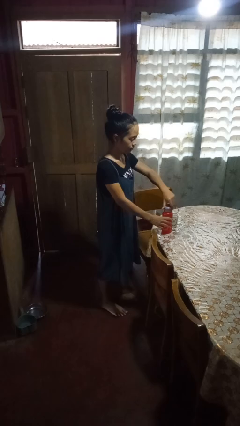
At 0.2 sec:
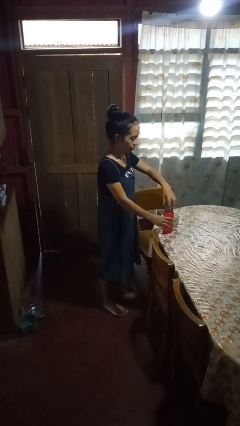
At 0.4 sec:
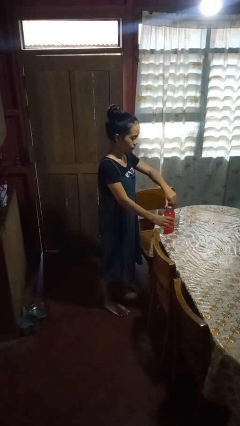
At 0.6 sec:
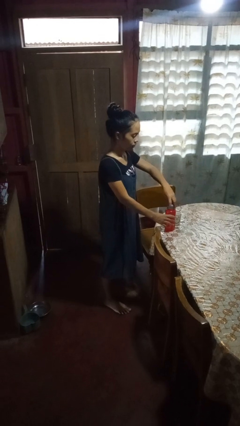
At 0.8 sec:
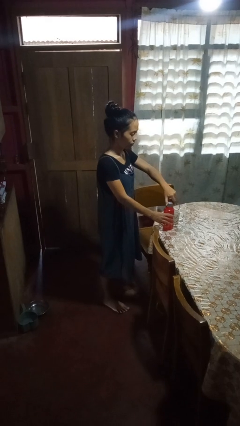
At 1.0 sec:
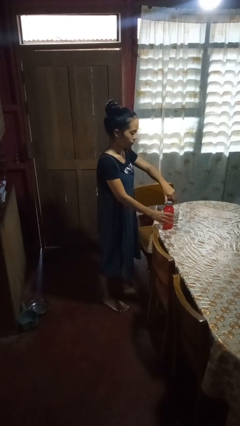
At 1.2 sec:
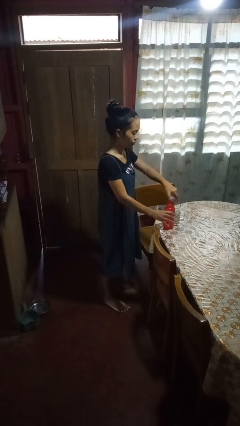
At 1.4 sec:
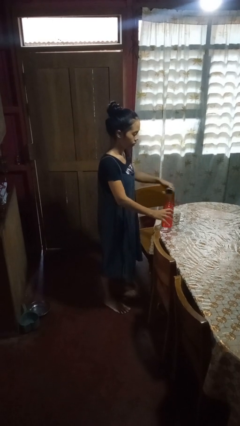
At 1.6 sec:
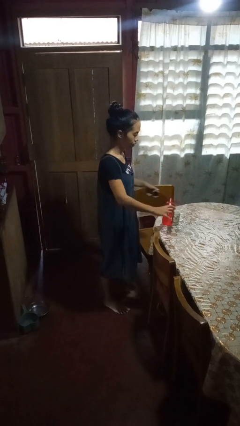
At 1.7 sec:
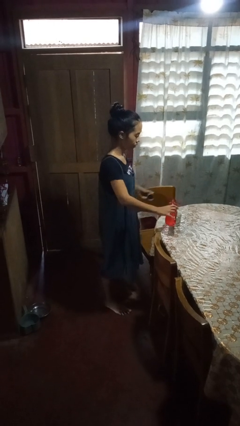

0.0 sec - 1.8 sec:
person unscrews lid from bottle

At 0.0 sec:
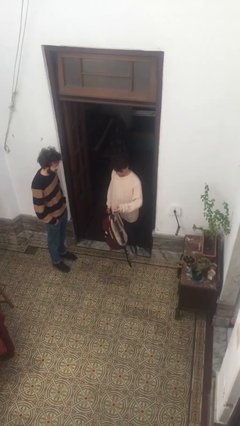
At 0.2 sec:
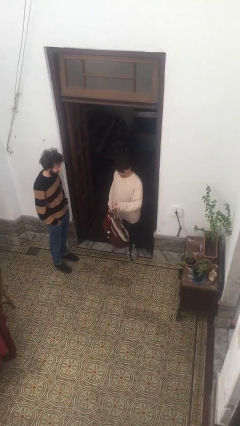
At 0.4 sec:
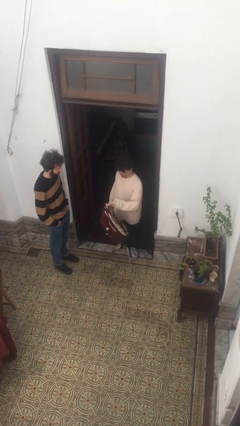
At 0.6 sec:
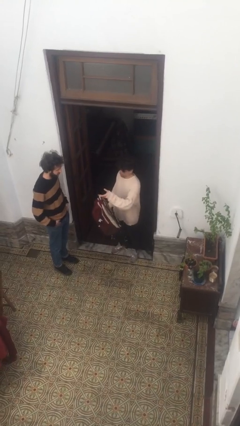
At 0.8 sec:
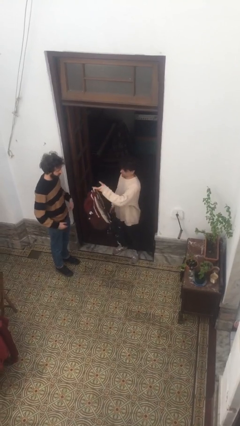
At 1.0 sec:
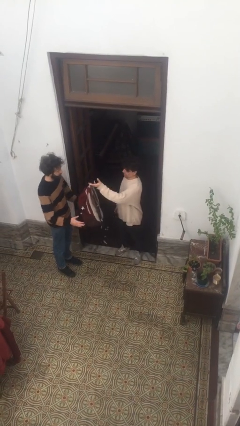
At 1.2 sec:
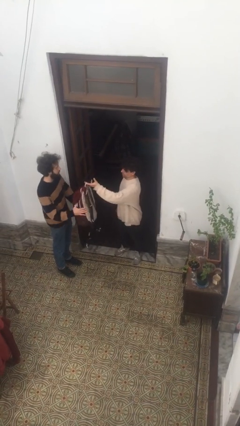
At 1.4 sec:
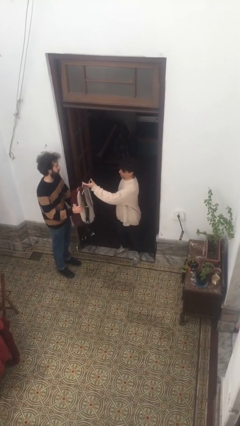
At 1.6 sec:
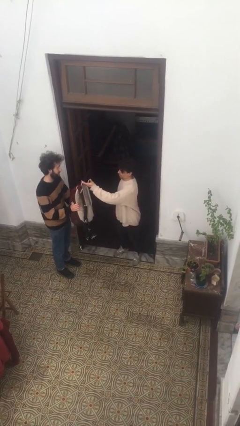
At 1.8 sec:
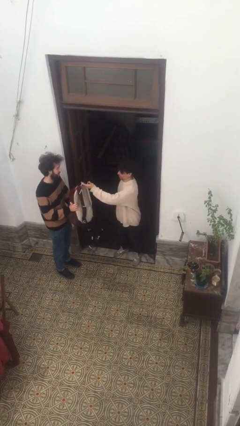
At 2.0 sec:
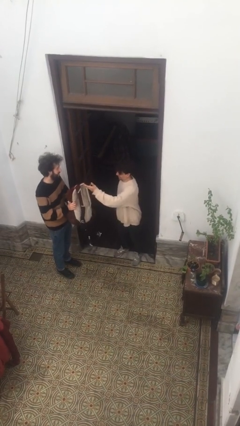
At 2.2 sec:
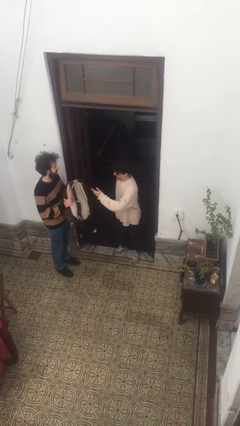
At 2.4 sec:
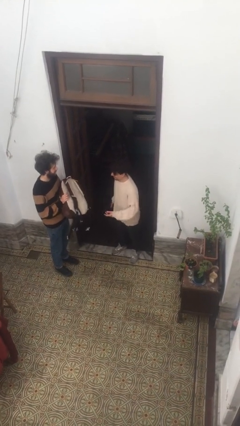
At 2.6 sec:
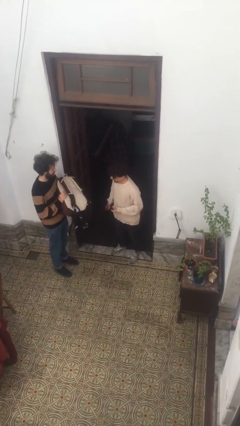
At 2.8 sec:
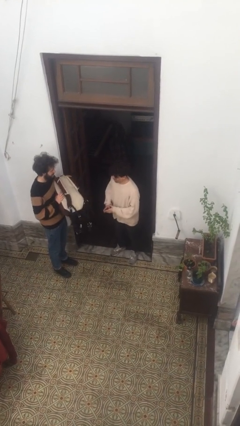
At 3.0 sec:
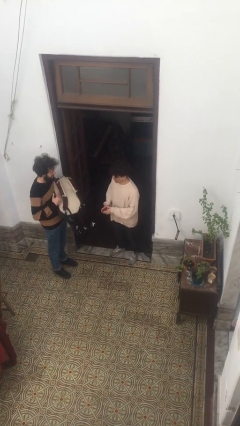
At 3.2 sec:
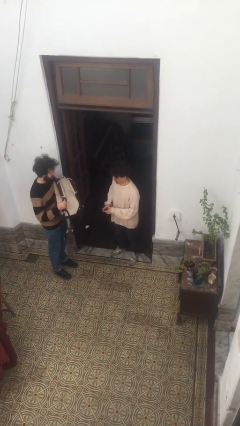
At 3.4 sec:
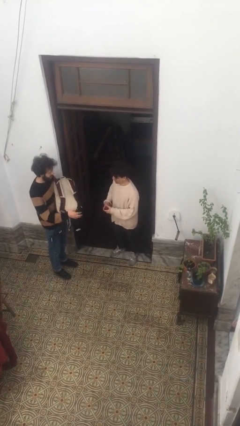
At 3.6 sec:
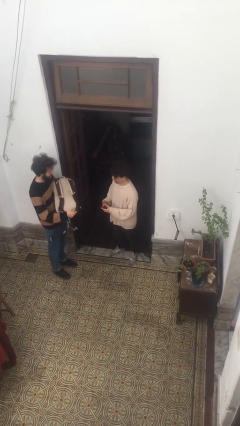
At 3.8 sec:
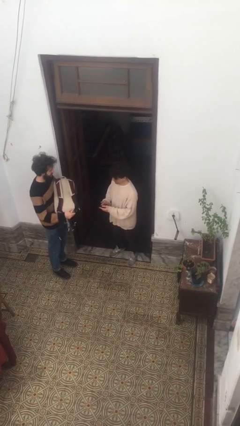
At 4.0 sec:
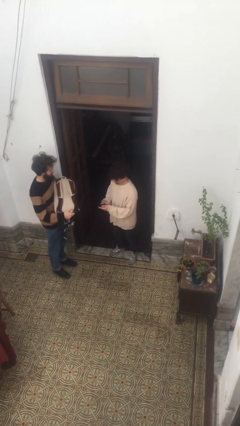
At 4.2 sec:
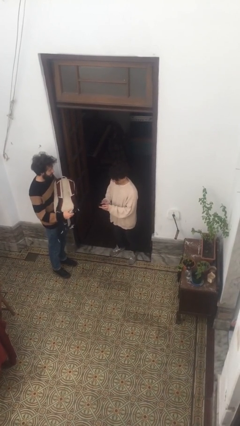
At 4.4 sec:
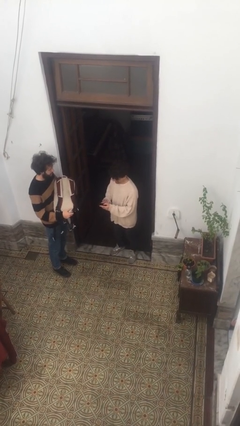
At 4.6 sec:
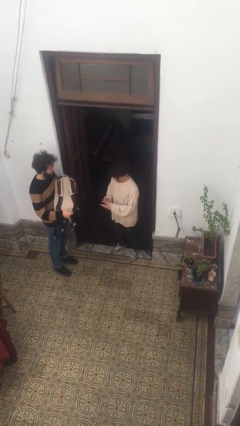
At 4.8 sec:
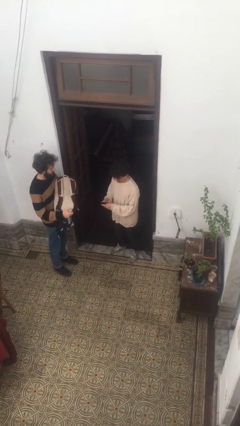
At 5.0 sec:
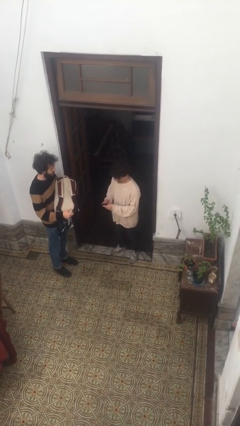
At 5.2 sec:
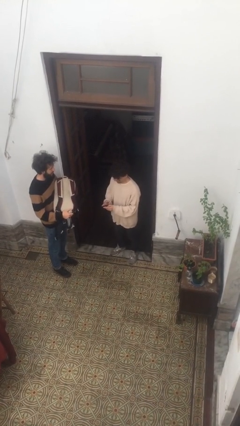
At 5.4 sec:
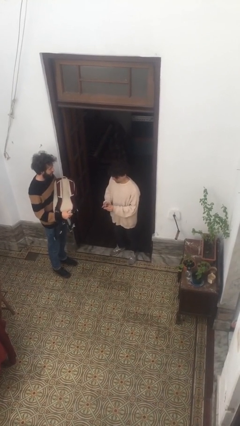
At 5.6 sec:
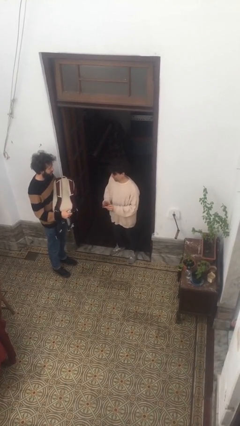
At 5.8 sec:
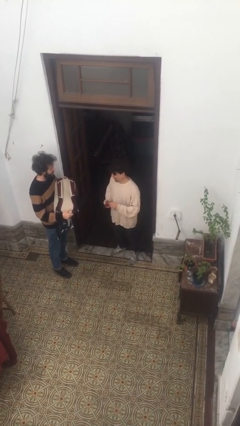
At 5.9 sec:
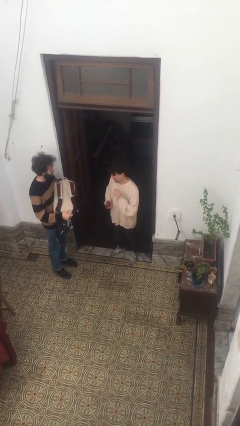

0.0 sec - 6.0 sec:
person transfers object to person

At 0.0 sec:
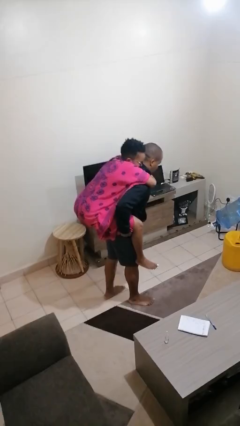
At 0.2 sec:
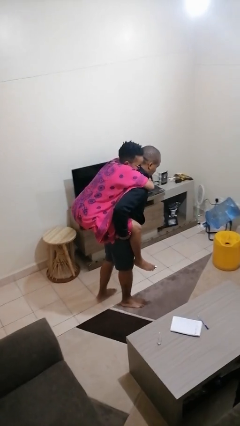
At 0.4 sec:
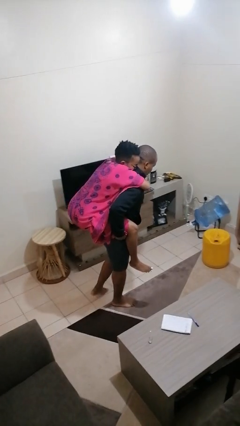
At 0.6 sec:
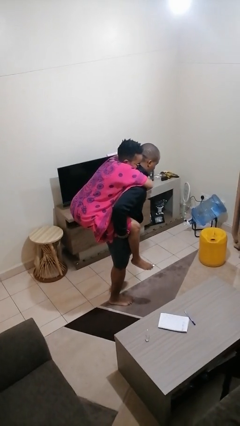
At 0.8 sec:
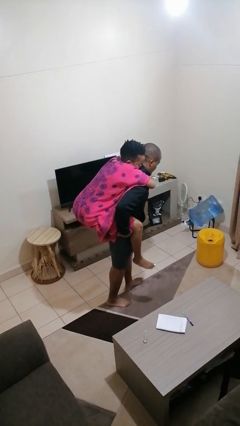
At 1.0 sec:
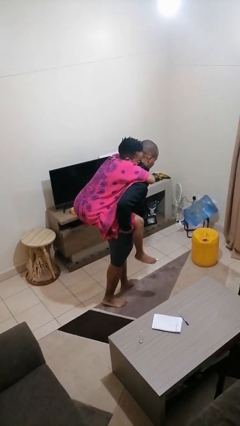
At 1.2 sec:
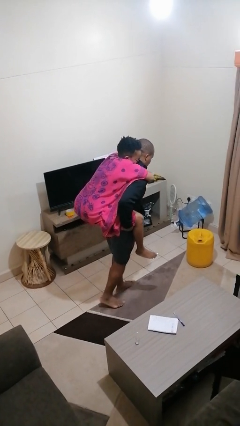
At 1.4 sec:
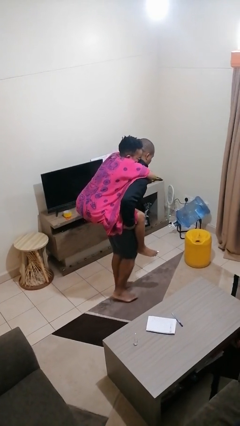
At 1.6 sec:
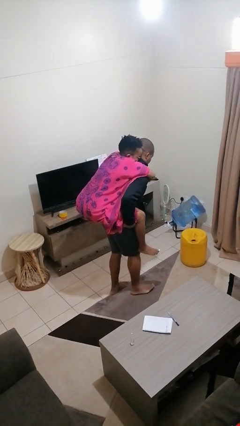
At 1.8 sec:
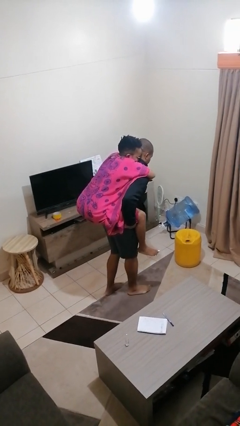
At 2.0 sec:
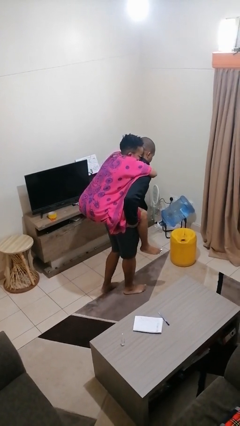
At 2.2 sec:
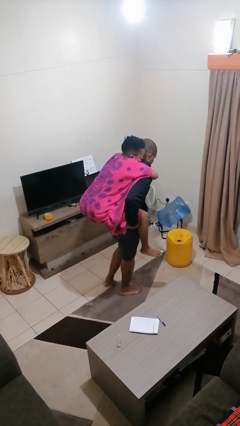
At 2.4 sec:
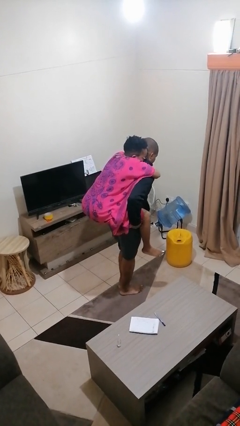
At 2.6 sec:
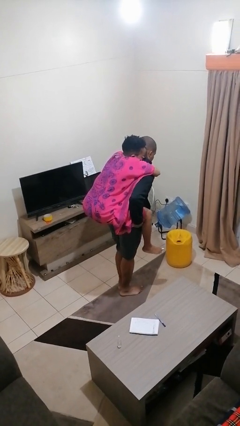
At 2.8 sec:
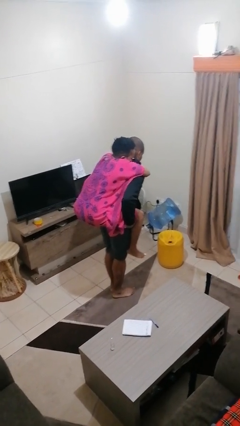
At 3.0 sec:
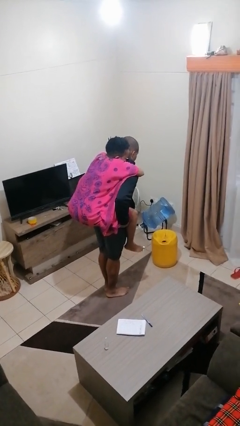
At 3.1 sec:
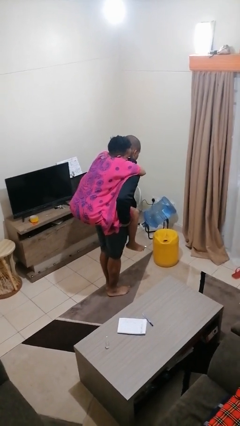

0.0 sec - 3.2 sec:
person carries person on back

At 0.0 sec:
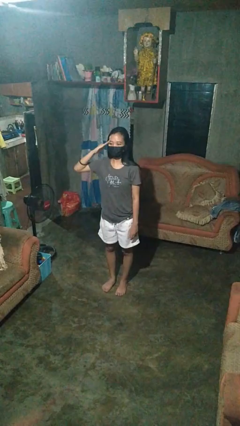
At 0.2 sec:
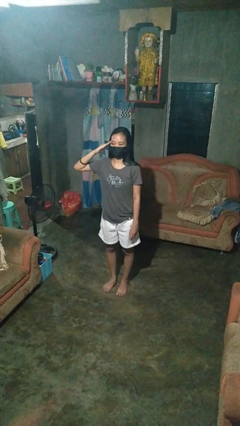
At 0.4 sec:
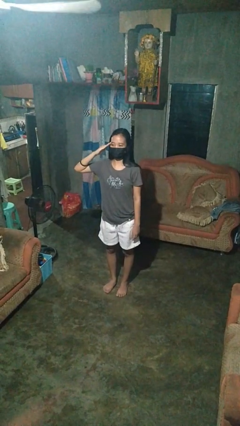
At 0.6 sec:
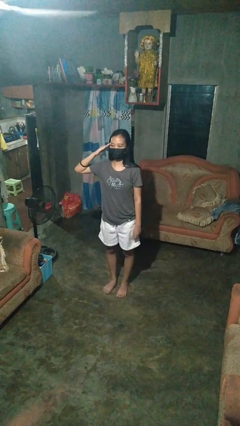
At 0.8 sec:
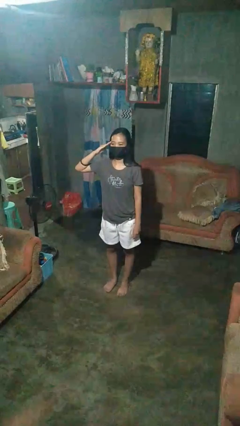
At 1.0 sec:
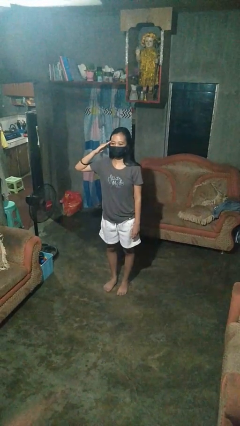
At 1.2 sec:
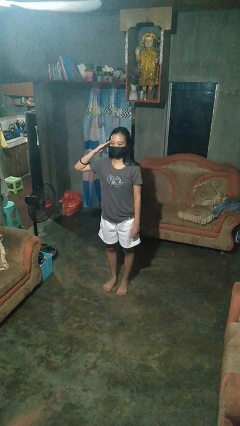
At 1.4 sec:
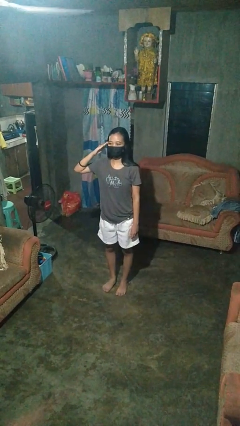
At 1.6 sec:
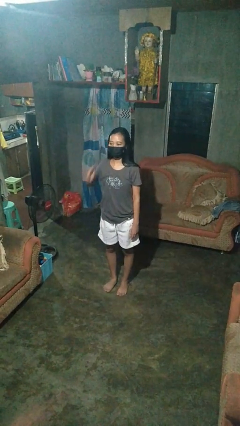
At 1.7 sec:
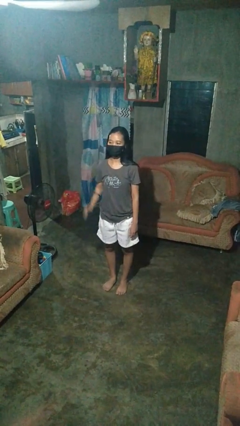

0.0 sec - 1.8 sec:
person salutes

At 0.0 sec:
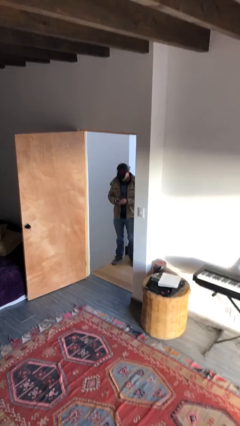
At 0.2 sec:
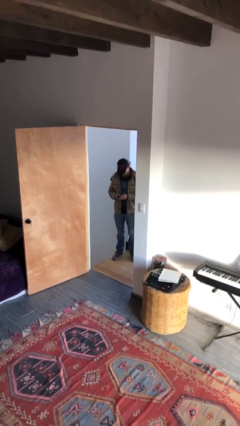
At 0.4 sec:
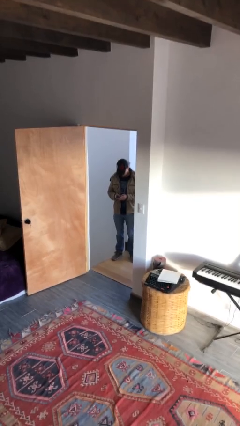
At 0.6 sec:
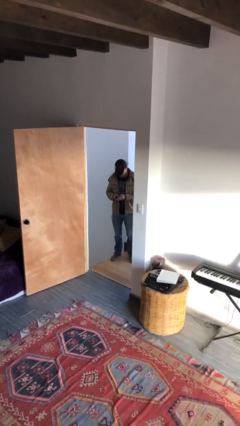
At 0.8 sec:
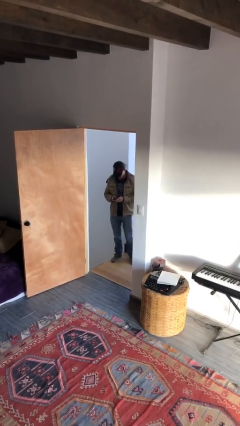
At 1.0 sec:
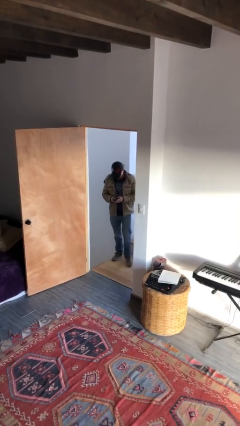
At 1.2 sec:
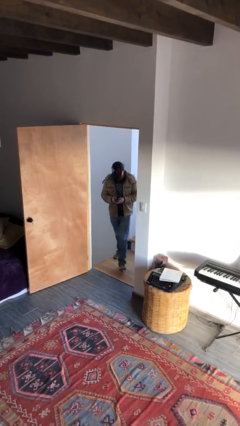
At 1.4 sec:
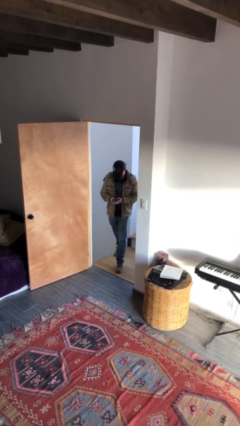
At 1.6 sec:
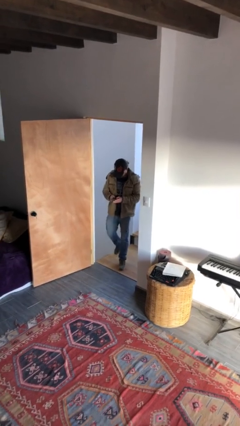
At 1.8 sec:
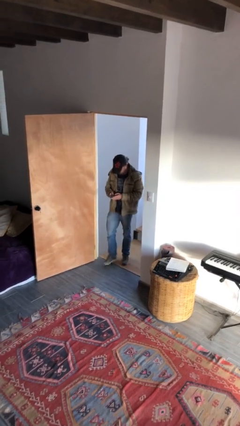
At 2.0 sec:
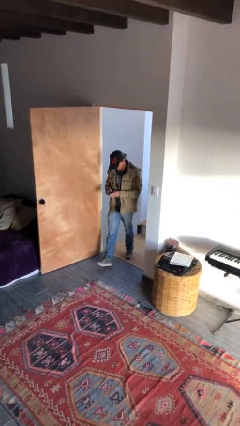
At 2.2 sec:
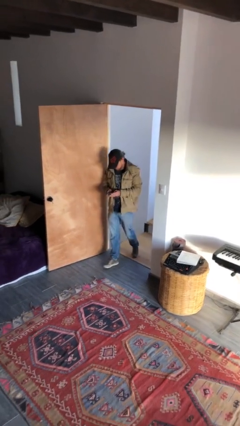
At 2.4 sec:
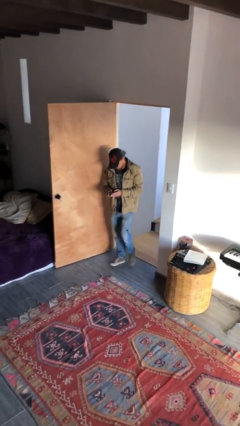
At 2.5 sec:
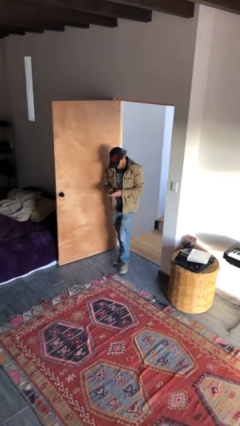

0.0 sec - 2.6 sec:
person enters scene through structure

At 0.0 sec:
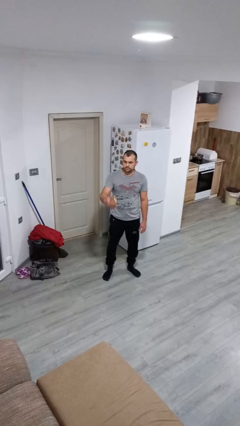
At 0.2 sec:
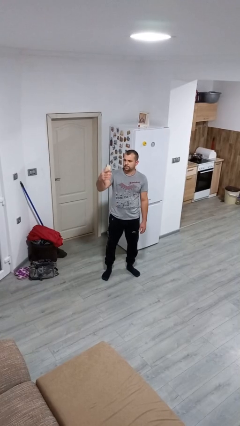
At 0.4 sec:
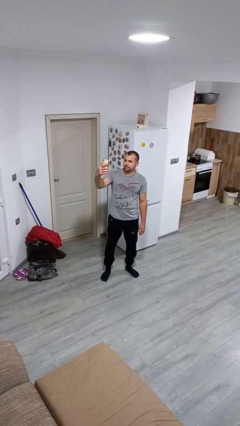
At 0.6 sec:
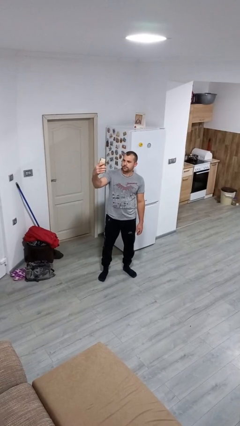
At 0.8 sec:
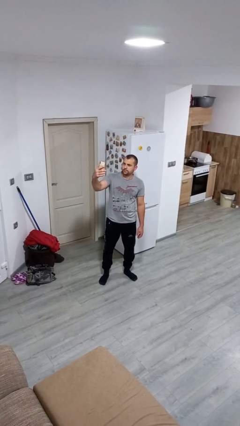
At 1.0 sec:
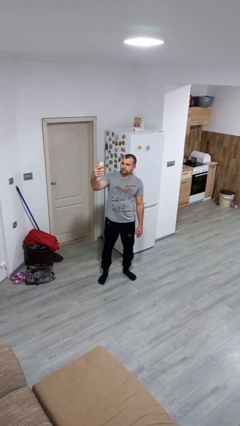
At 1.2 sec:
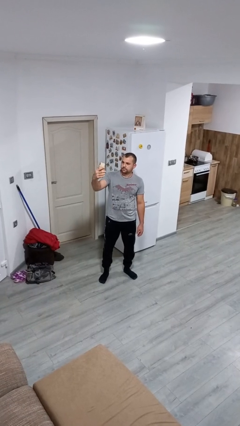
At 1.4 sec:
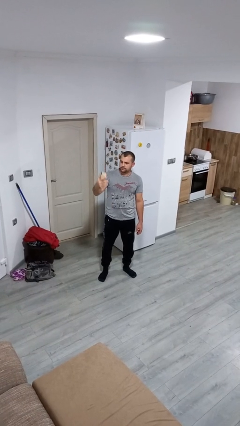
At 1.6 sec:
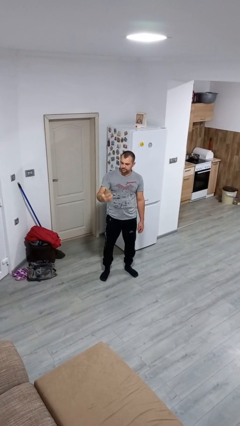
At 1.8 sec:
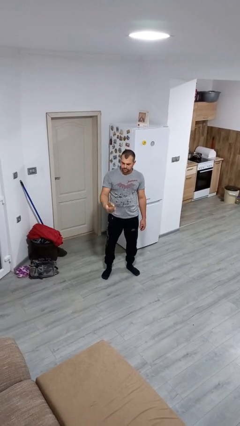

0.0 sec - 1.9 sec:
person takes selfie
